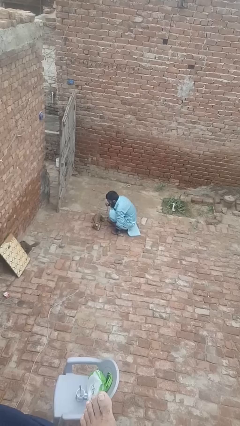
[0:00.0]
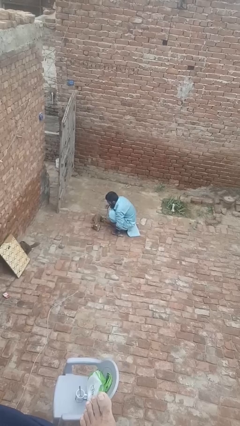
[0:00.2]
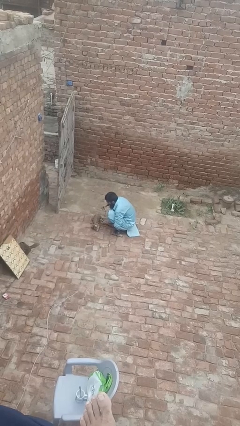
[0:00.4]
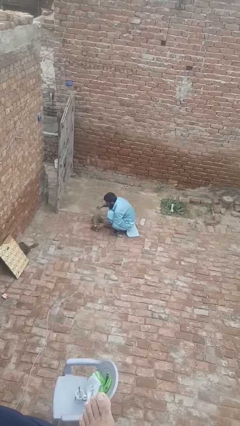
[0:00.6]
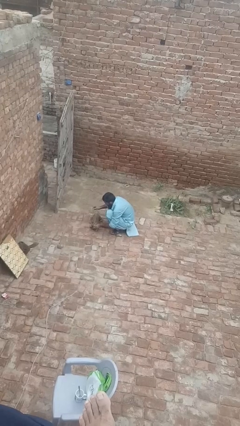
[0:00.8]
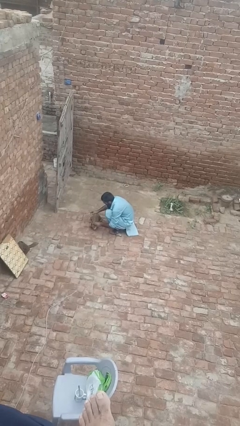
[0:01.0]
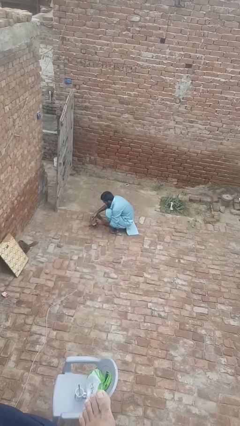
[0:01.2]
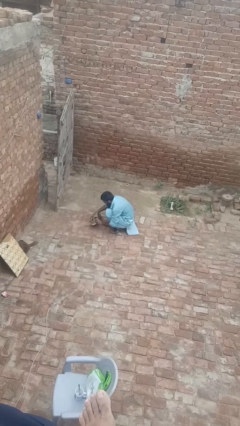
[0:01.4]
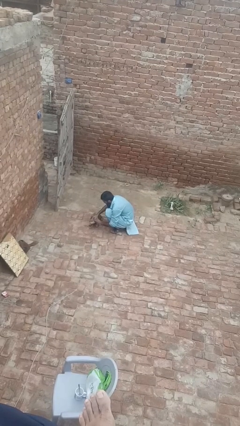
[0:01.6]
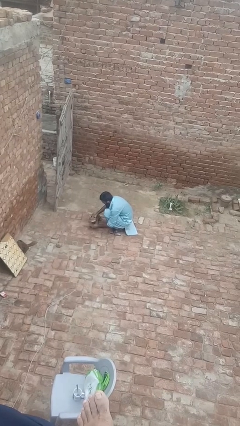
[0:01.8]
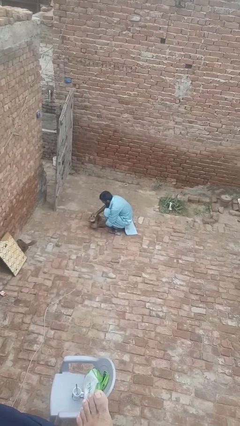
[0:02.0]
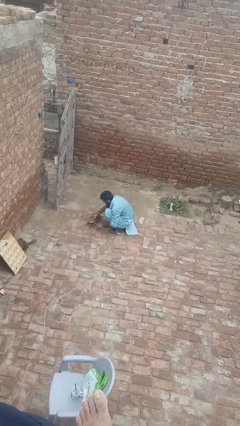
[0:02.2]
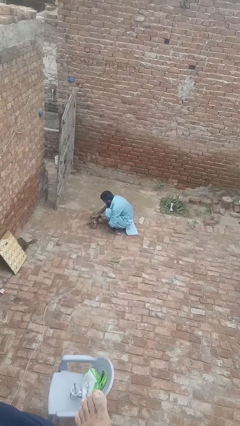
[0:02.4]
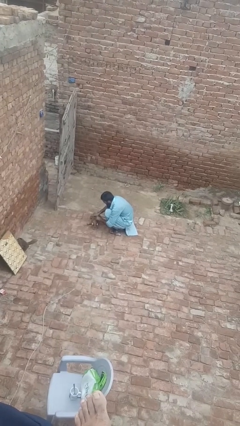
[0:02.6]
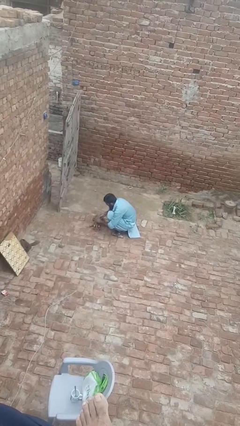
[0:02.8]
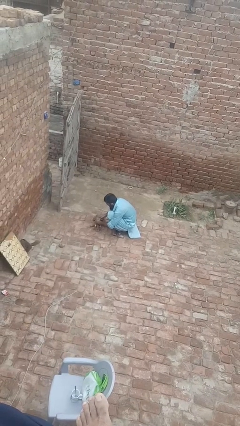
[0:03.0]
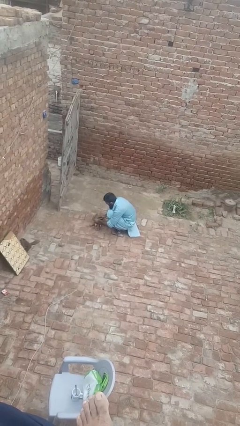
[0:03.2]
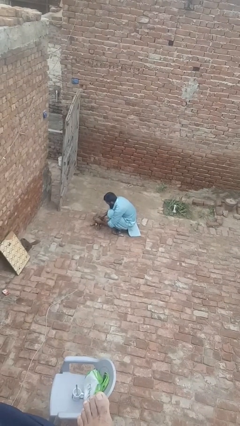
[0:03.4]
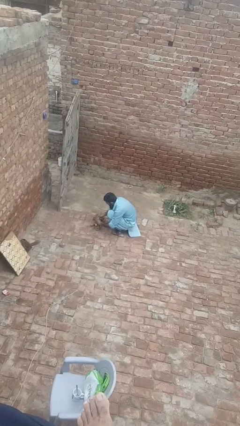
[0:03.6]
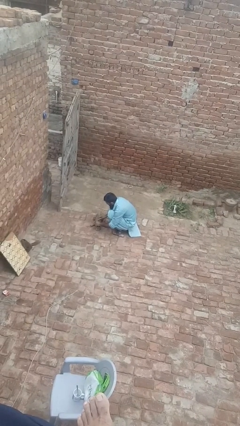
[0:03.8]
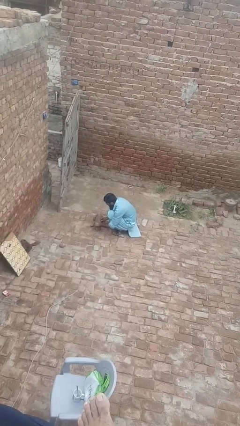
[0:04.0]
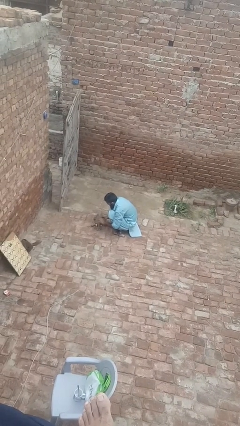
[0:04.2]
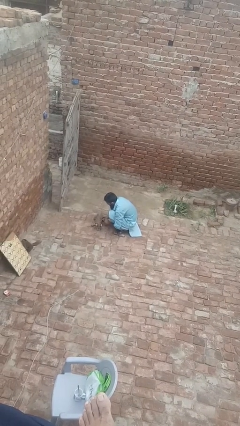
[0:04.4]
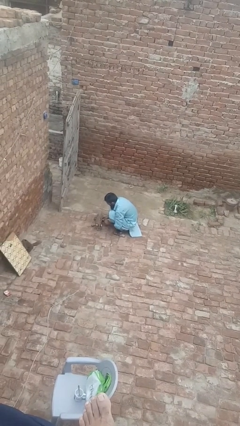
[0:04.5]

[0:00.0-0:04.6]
person attaches leash to dog

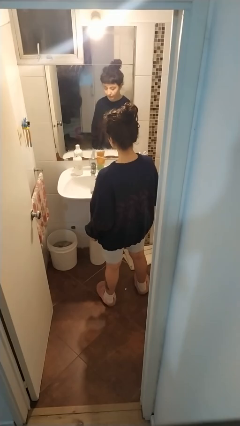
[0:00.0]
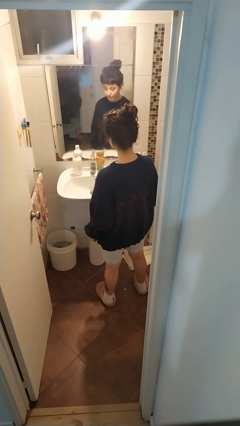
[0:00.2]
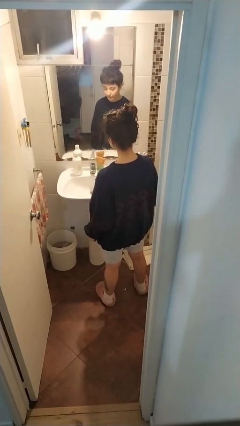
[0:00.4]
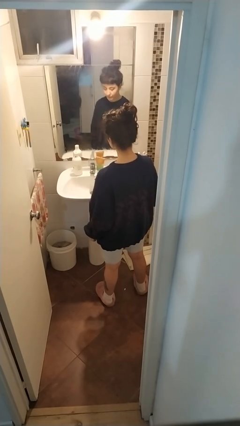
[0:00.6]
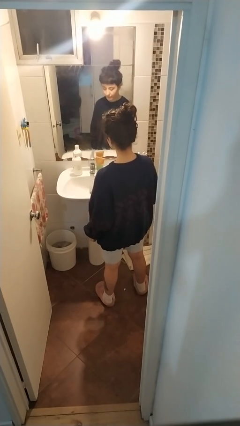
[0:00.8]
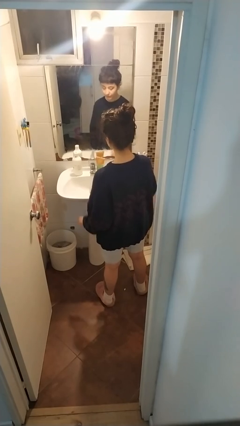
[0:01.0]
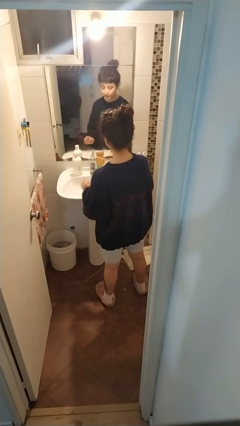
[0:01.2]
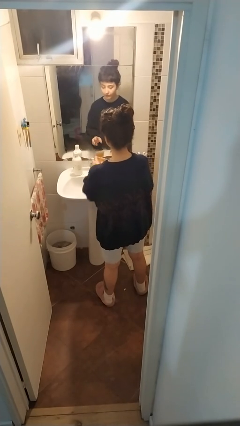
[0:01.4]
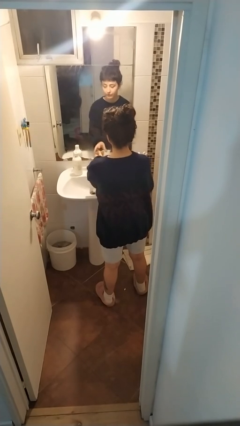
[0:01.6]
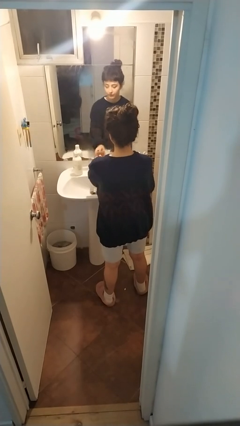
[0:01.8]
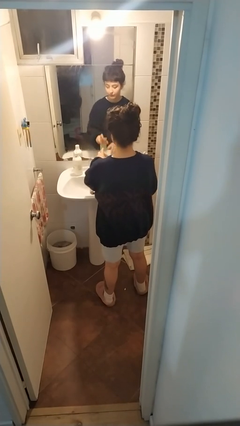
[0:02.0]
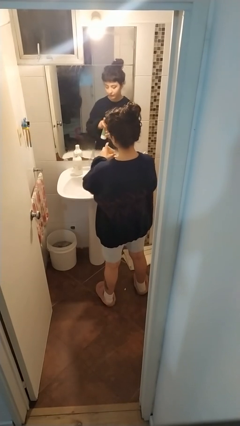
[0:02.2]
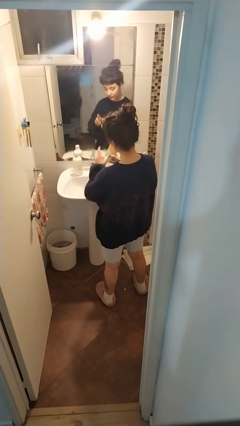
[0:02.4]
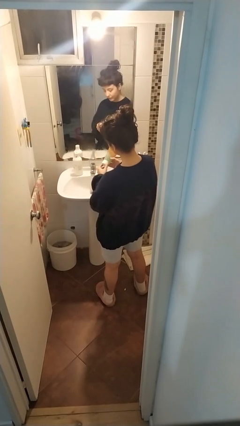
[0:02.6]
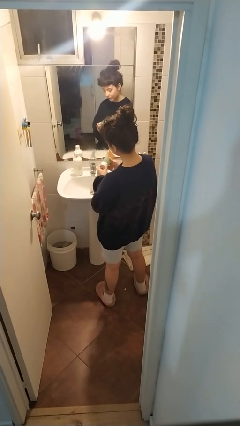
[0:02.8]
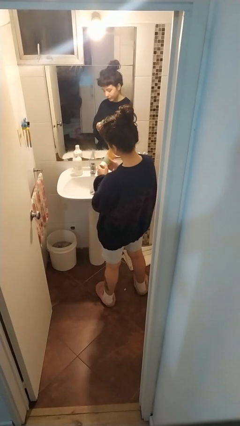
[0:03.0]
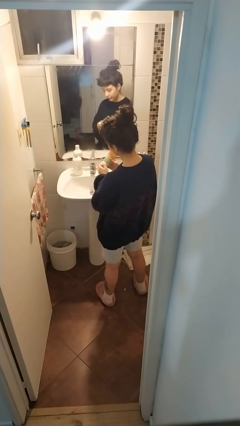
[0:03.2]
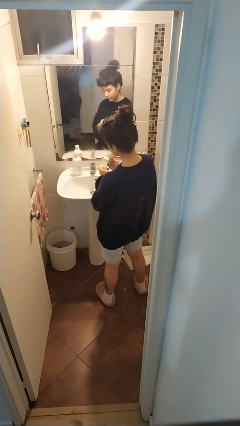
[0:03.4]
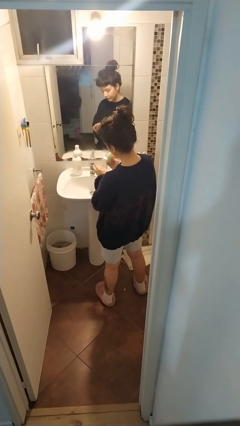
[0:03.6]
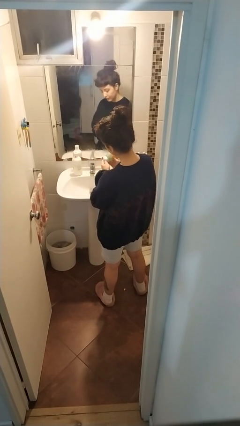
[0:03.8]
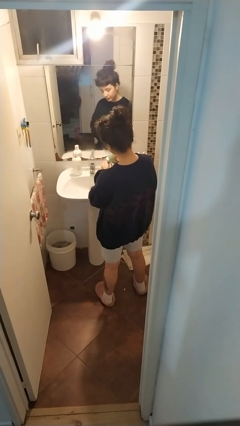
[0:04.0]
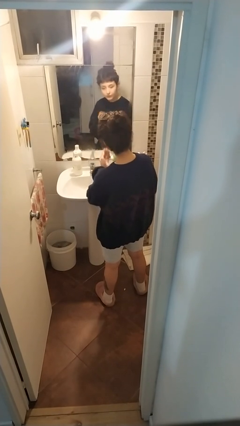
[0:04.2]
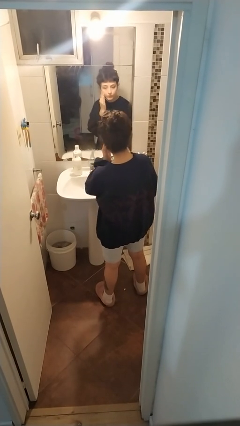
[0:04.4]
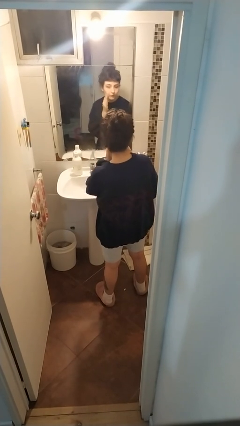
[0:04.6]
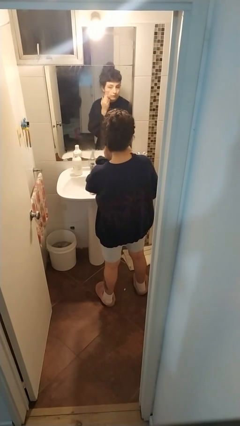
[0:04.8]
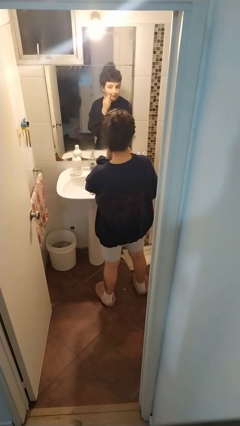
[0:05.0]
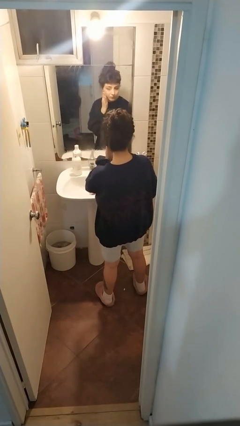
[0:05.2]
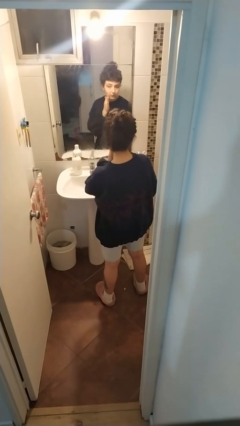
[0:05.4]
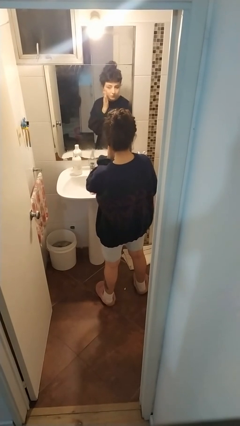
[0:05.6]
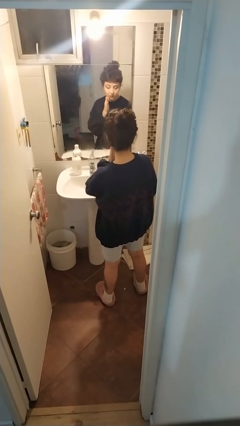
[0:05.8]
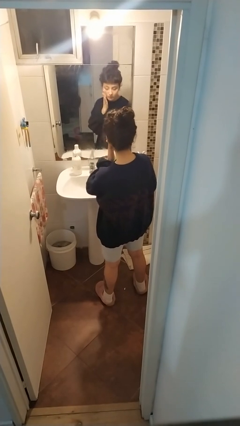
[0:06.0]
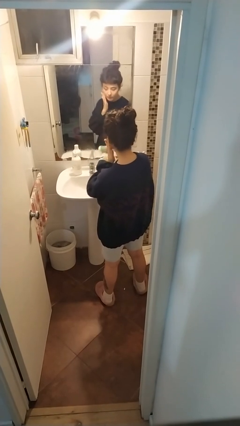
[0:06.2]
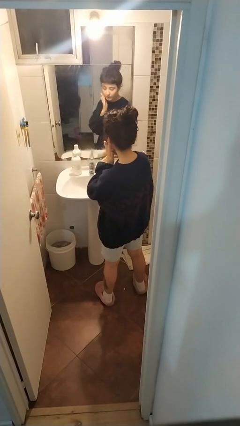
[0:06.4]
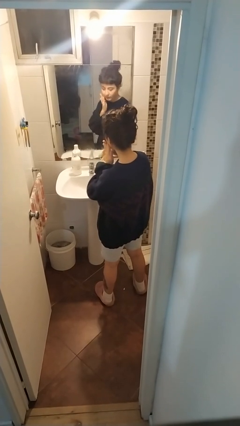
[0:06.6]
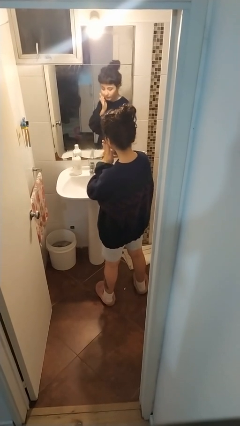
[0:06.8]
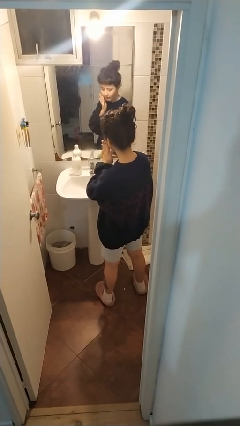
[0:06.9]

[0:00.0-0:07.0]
person applies shaving cream

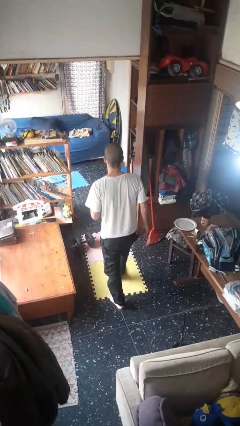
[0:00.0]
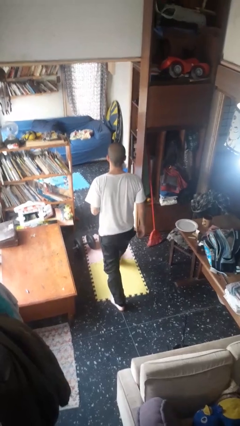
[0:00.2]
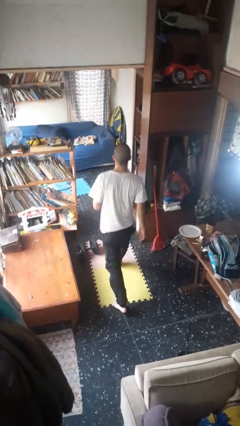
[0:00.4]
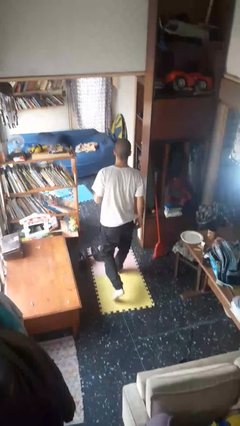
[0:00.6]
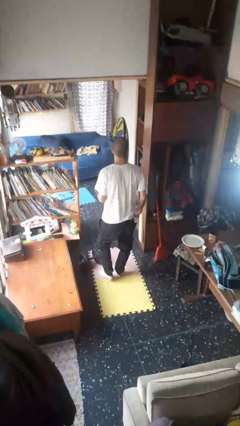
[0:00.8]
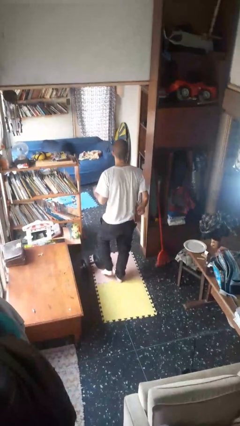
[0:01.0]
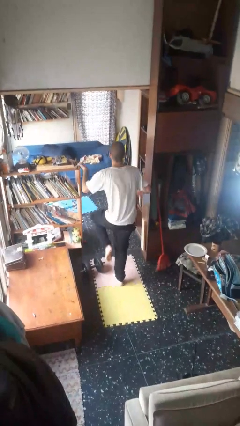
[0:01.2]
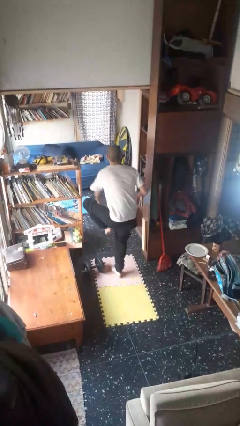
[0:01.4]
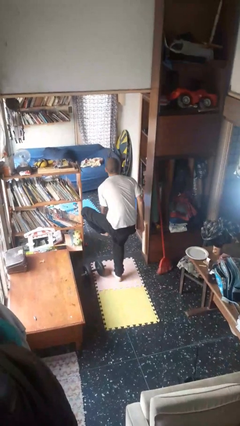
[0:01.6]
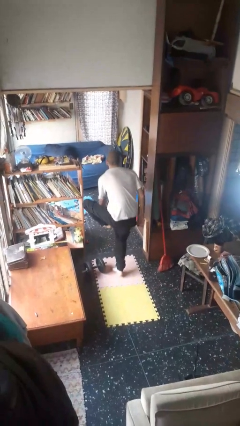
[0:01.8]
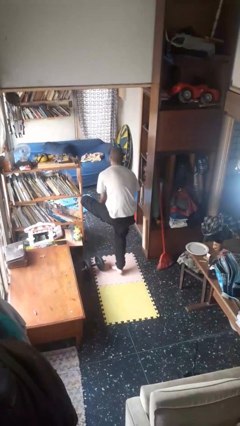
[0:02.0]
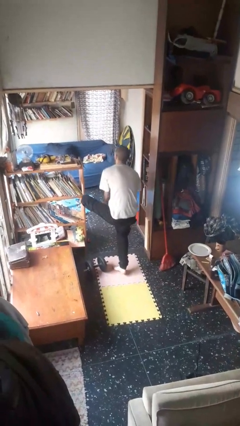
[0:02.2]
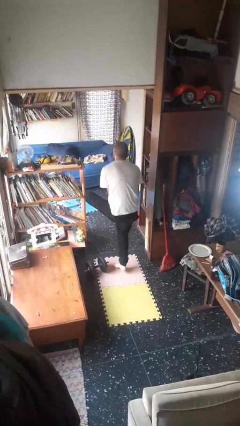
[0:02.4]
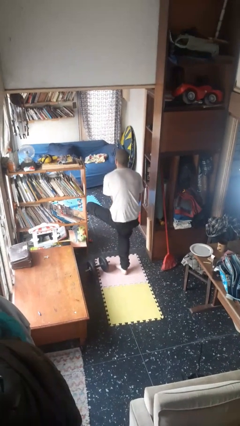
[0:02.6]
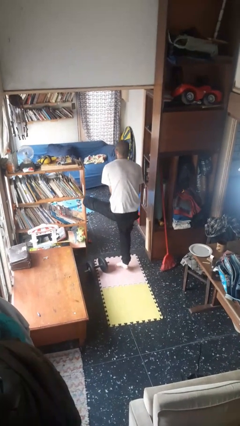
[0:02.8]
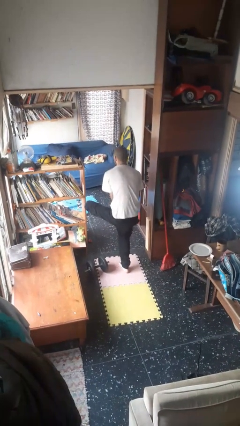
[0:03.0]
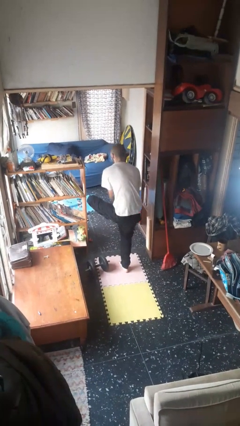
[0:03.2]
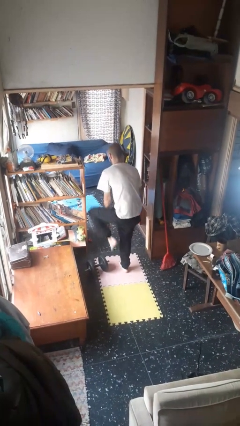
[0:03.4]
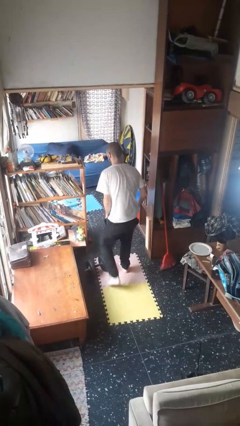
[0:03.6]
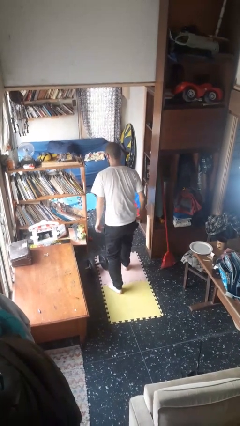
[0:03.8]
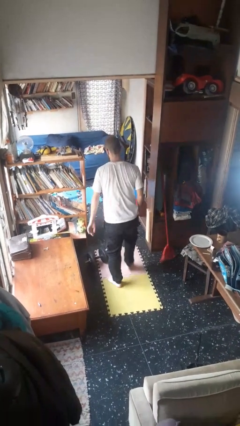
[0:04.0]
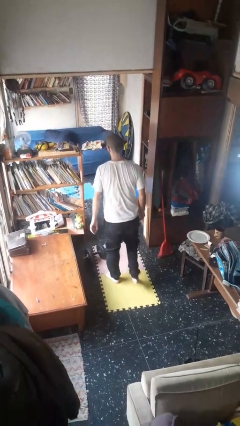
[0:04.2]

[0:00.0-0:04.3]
person stubs toe

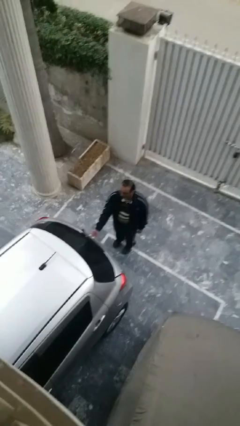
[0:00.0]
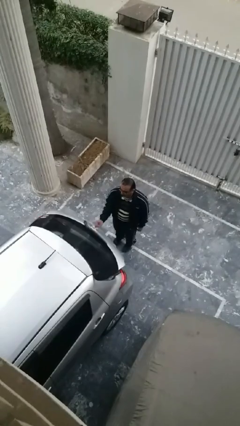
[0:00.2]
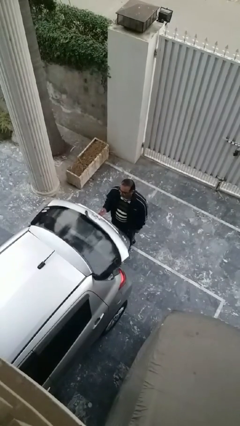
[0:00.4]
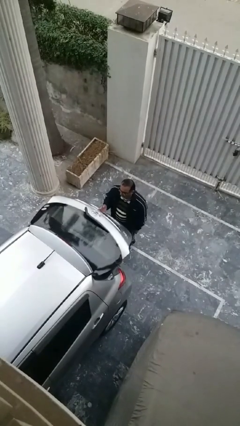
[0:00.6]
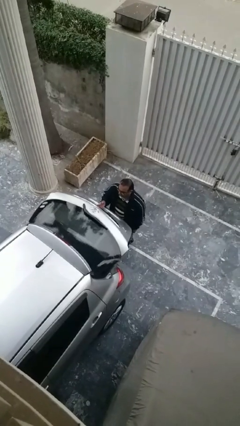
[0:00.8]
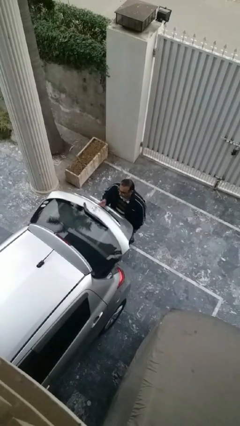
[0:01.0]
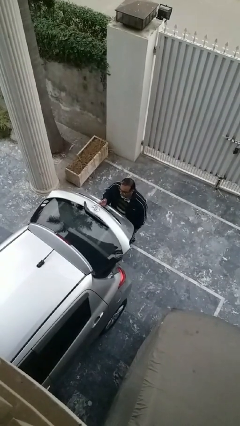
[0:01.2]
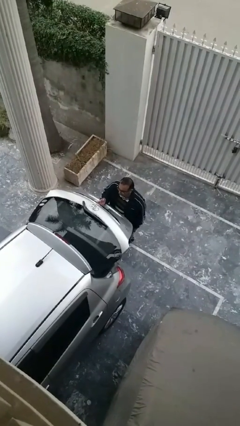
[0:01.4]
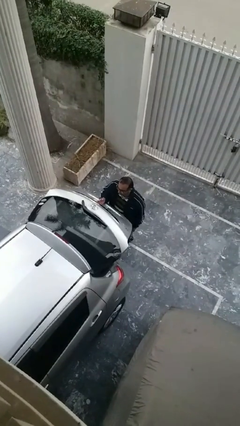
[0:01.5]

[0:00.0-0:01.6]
person opens car trunk

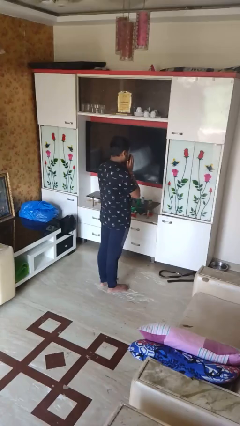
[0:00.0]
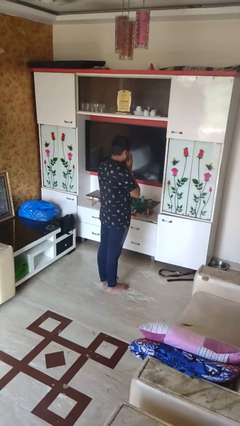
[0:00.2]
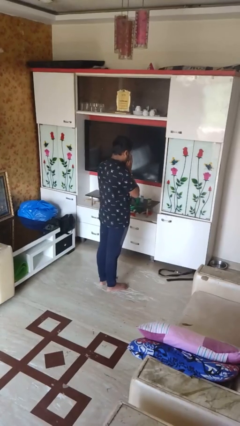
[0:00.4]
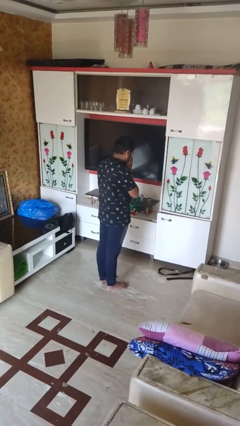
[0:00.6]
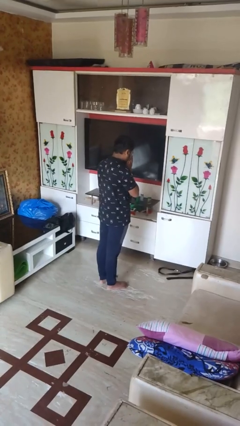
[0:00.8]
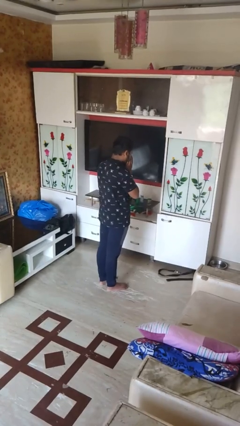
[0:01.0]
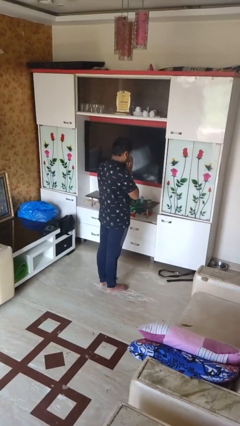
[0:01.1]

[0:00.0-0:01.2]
person sneezes into hand
